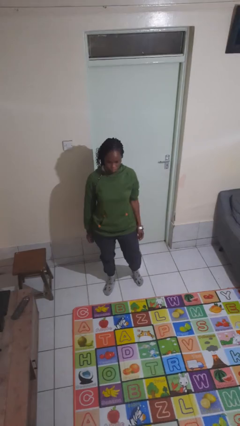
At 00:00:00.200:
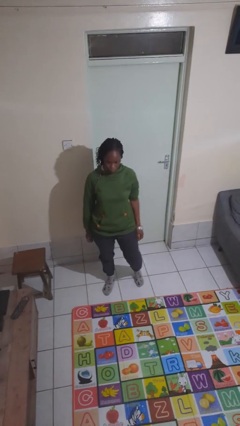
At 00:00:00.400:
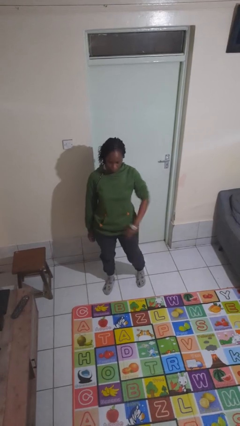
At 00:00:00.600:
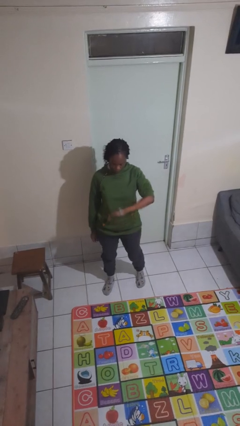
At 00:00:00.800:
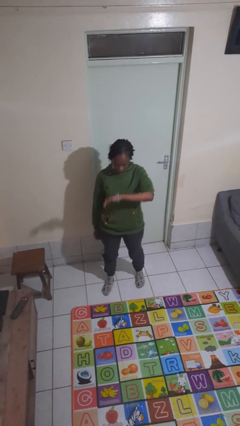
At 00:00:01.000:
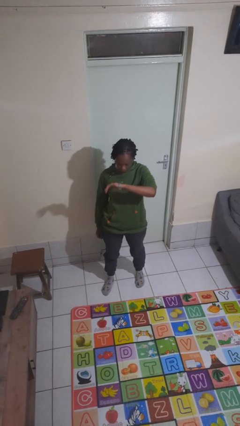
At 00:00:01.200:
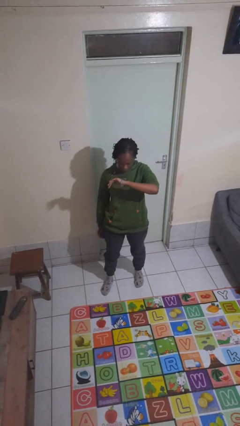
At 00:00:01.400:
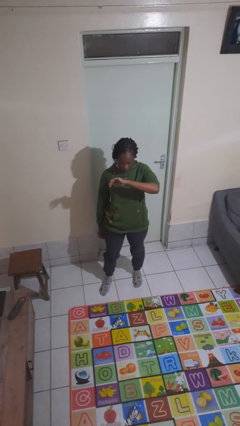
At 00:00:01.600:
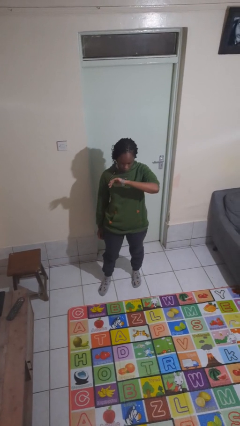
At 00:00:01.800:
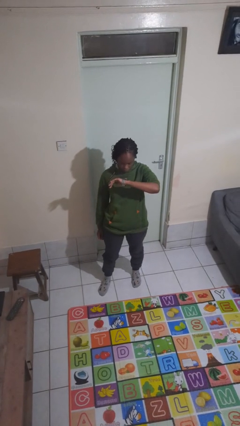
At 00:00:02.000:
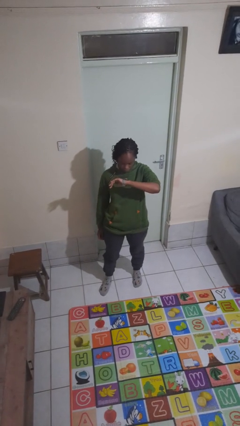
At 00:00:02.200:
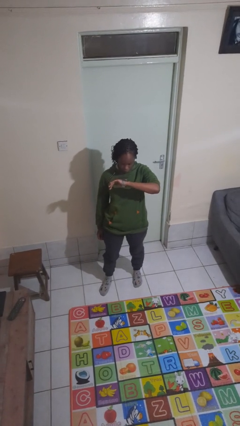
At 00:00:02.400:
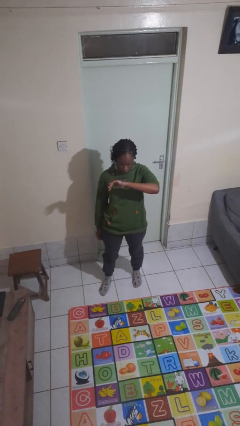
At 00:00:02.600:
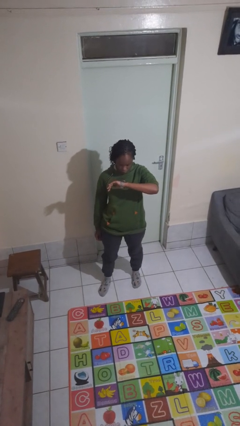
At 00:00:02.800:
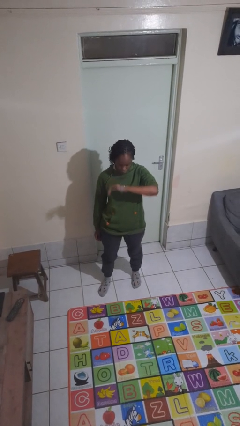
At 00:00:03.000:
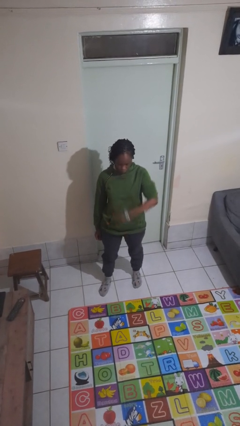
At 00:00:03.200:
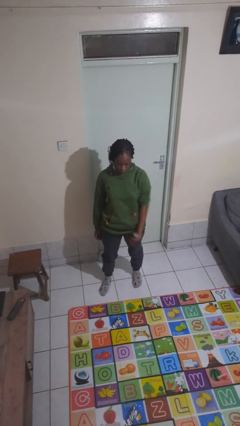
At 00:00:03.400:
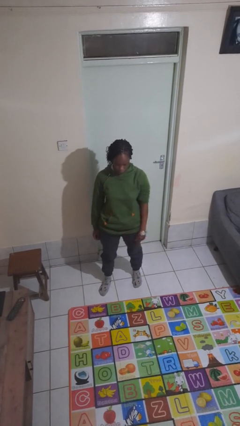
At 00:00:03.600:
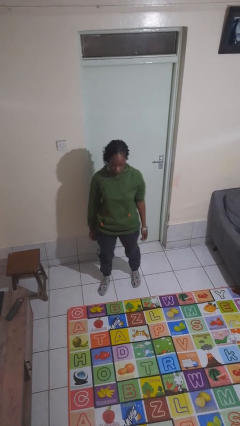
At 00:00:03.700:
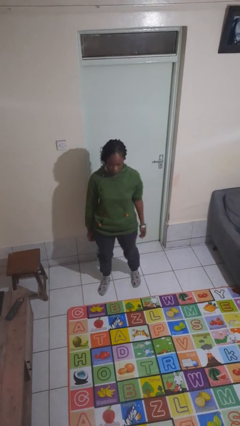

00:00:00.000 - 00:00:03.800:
person looks at wristwatch

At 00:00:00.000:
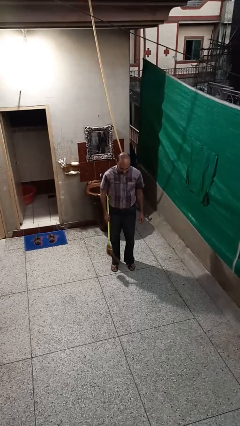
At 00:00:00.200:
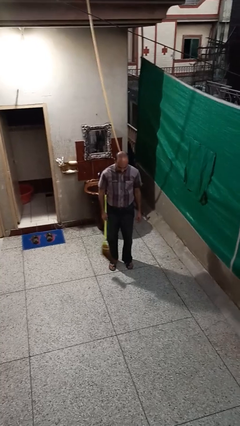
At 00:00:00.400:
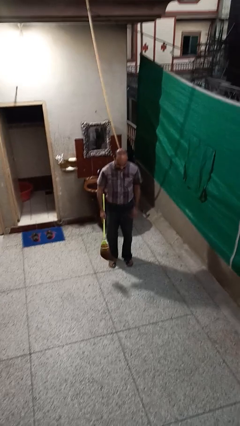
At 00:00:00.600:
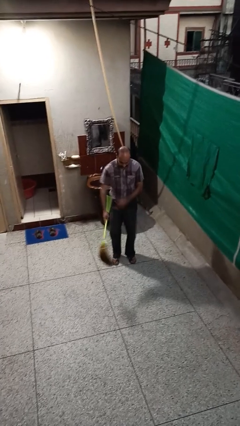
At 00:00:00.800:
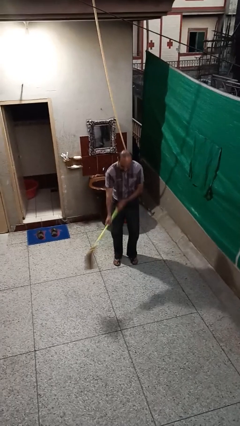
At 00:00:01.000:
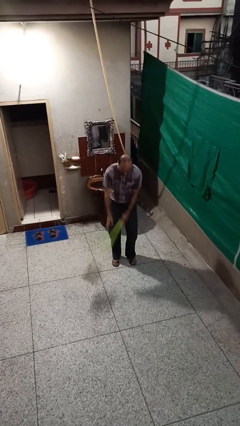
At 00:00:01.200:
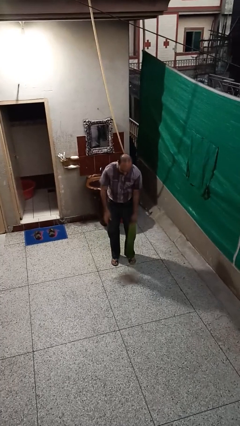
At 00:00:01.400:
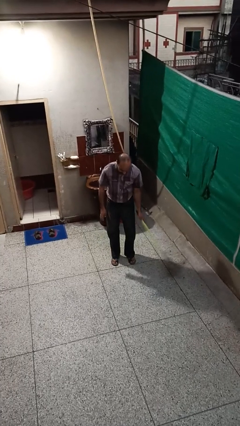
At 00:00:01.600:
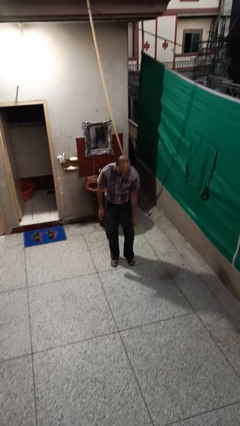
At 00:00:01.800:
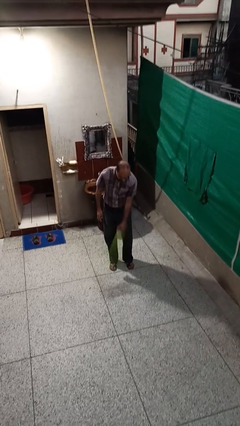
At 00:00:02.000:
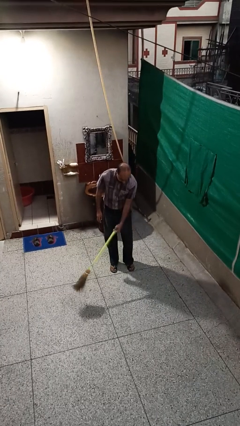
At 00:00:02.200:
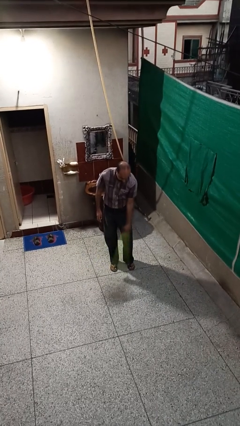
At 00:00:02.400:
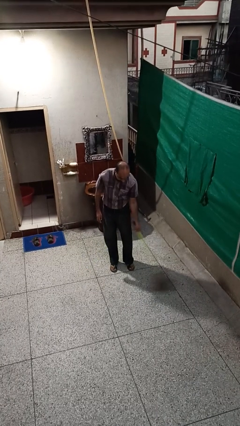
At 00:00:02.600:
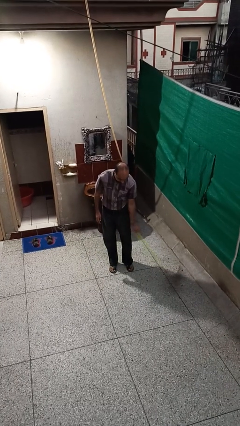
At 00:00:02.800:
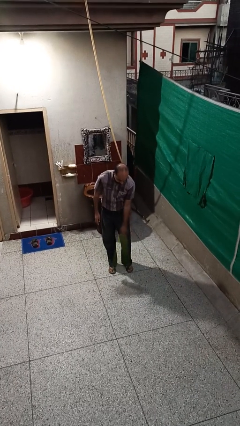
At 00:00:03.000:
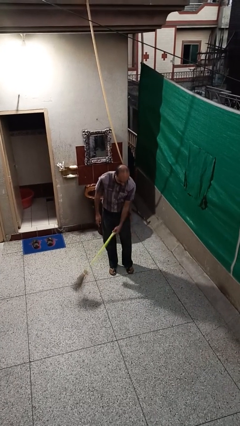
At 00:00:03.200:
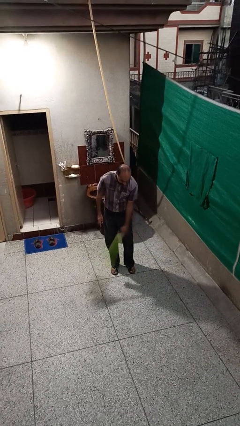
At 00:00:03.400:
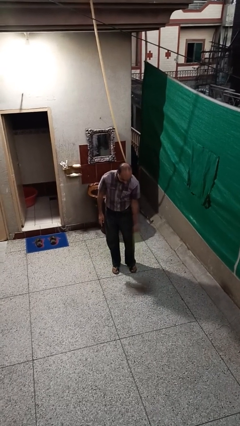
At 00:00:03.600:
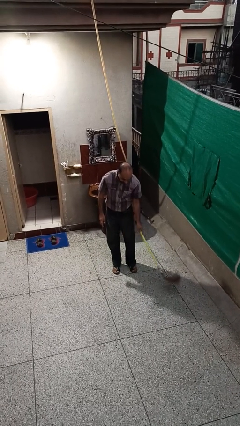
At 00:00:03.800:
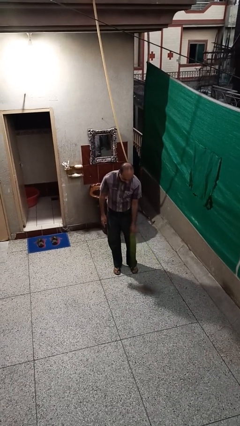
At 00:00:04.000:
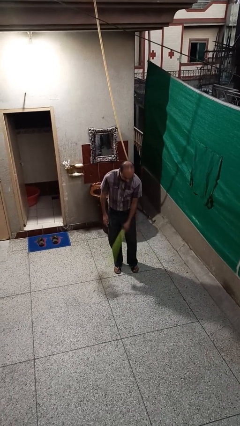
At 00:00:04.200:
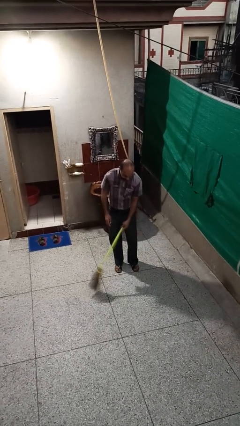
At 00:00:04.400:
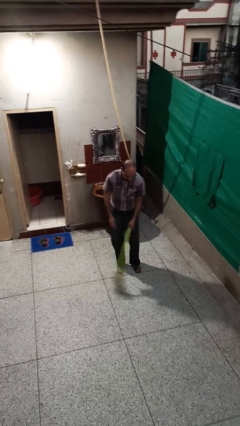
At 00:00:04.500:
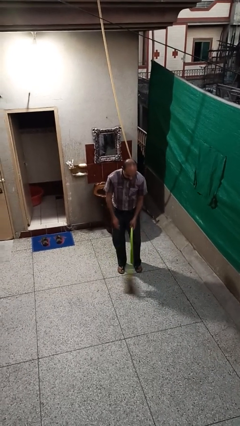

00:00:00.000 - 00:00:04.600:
person sweeps floor

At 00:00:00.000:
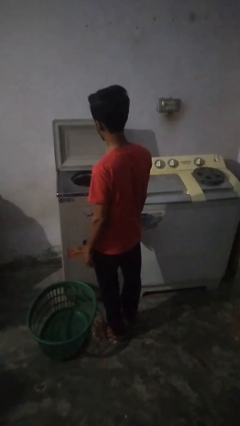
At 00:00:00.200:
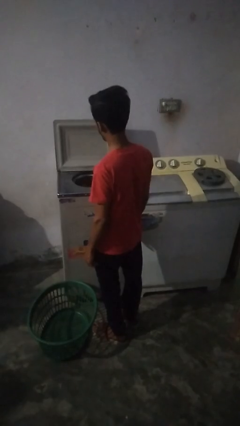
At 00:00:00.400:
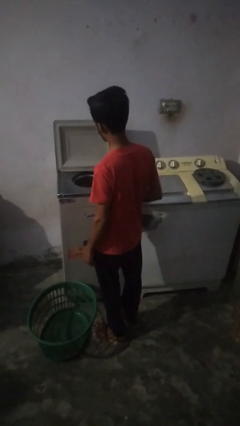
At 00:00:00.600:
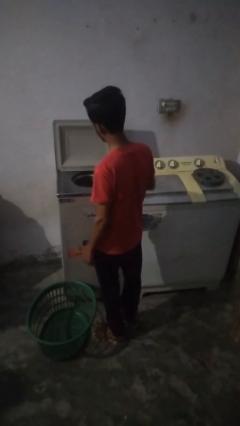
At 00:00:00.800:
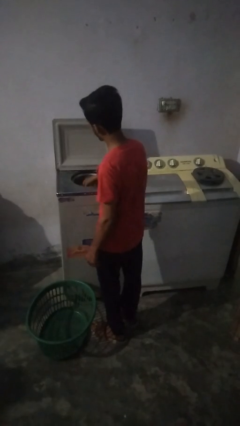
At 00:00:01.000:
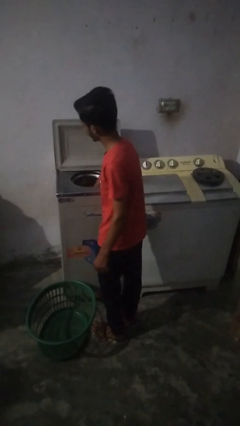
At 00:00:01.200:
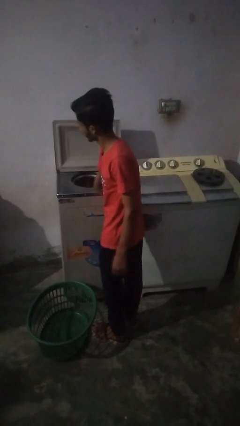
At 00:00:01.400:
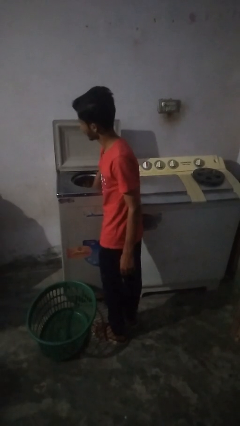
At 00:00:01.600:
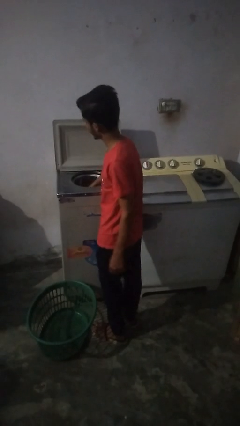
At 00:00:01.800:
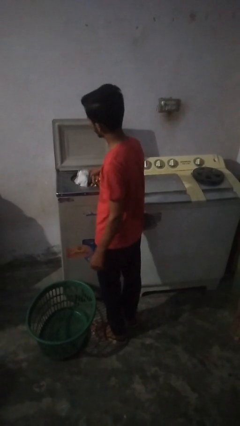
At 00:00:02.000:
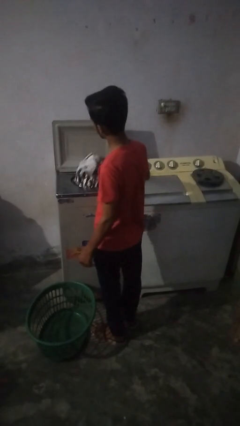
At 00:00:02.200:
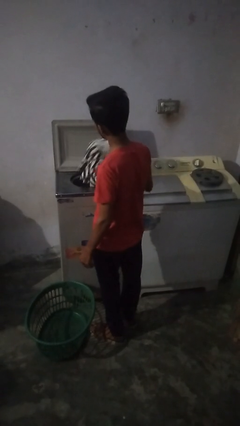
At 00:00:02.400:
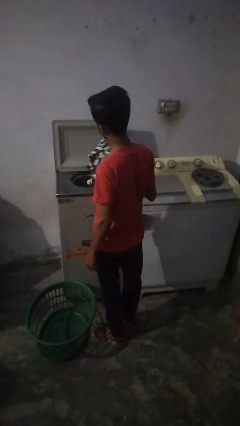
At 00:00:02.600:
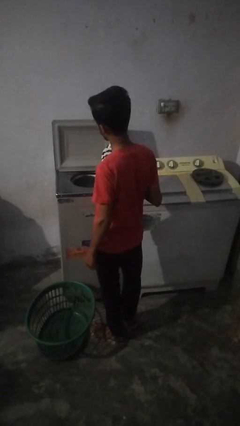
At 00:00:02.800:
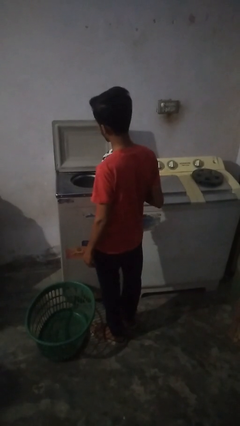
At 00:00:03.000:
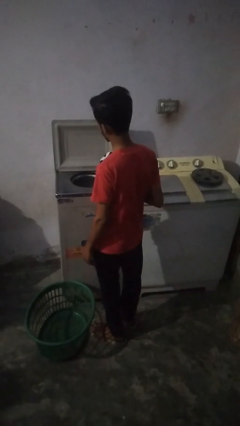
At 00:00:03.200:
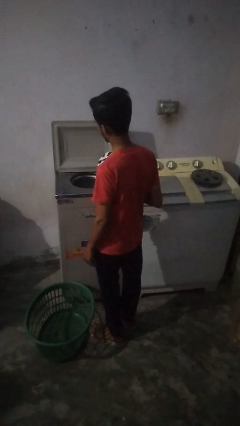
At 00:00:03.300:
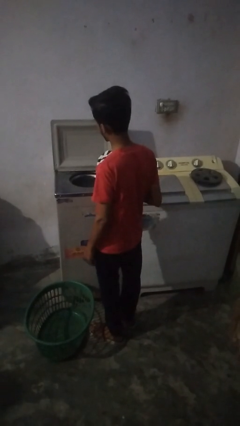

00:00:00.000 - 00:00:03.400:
person unloads dryer

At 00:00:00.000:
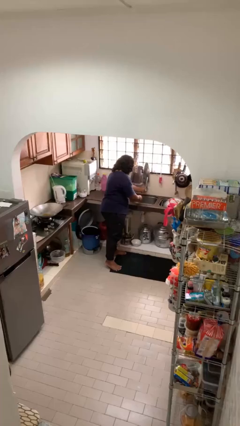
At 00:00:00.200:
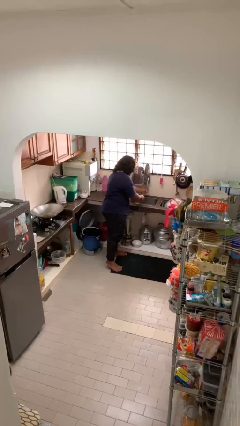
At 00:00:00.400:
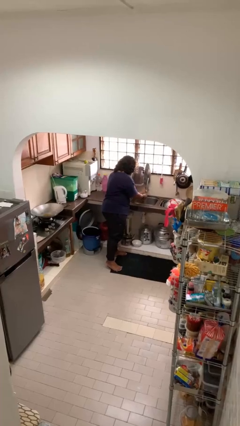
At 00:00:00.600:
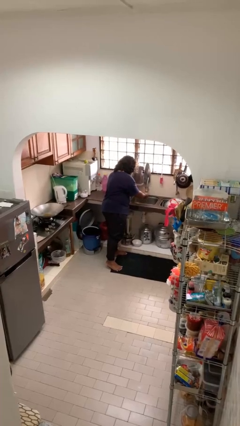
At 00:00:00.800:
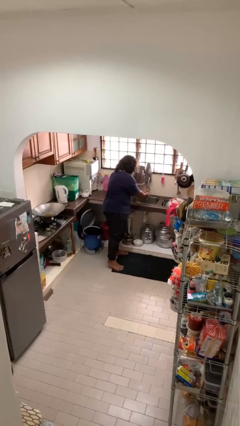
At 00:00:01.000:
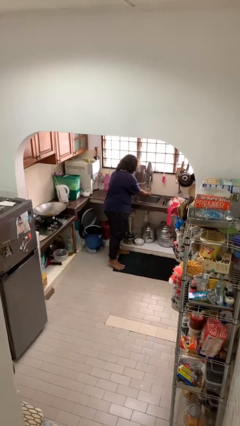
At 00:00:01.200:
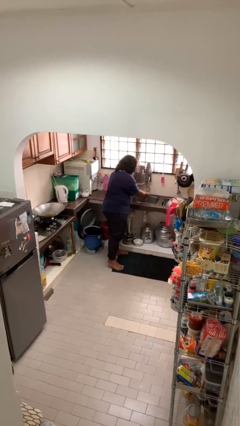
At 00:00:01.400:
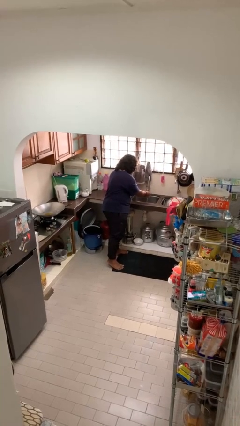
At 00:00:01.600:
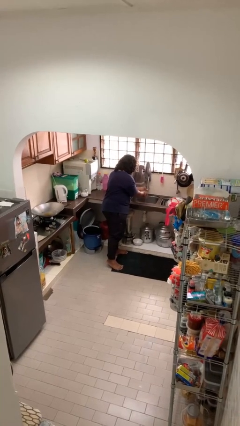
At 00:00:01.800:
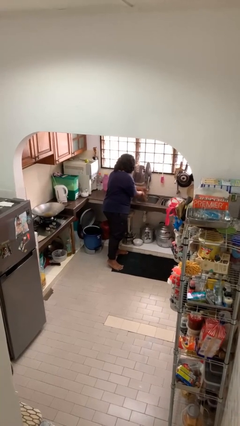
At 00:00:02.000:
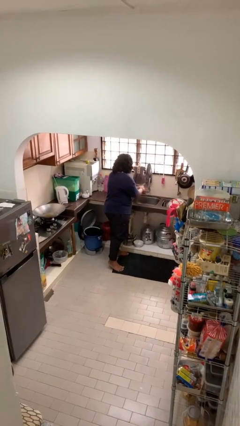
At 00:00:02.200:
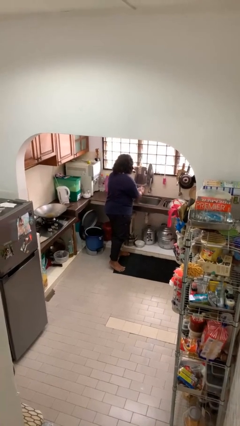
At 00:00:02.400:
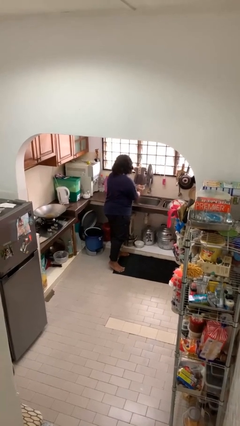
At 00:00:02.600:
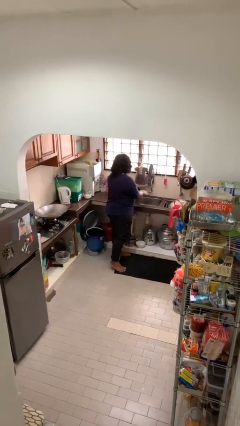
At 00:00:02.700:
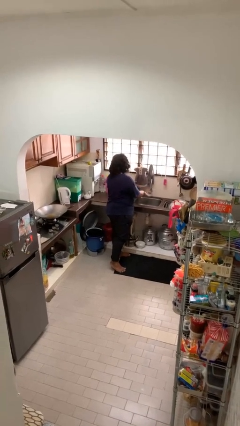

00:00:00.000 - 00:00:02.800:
person washes hands

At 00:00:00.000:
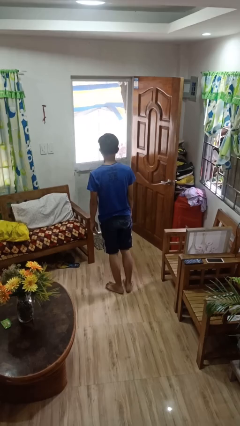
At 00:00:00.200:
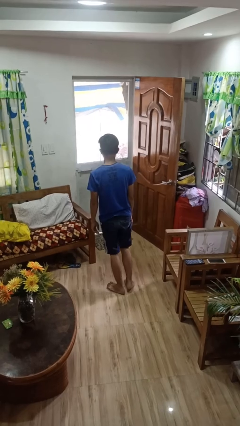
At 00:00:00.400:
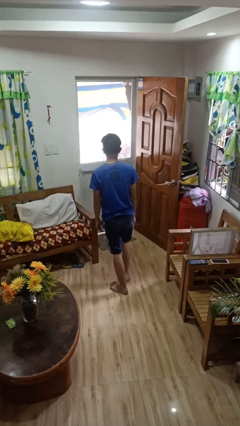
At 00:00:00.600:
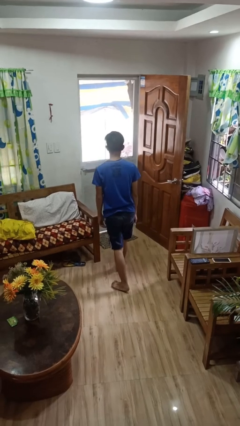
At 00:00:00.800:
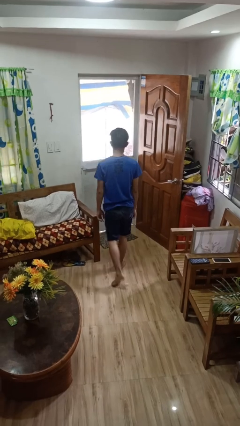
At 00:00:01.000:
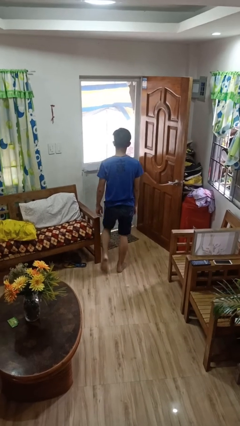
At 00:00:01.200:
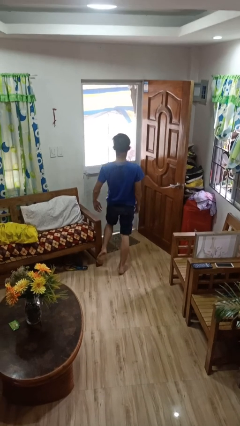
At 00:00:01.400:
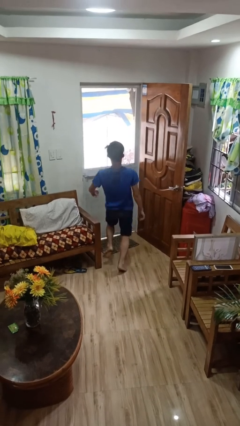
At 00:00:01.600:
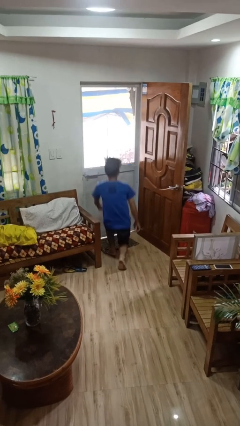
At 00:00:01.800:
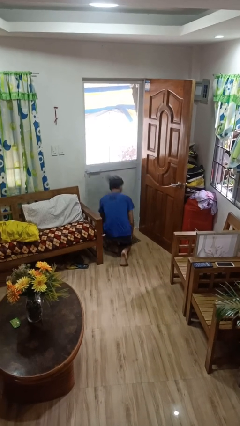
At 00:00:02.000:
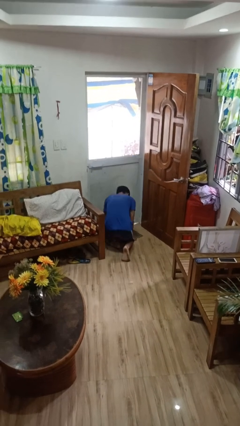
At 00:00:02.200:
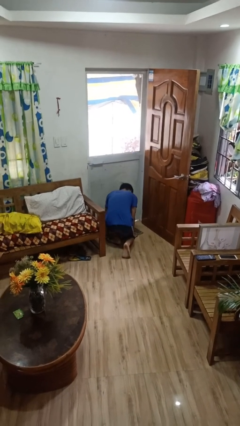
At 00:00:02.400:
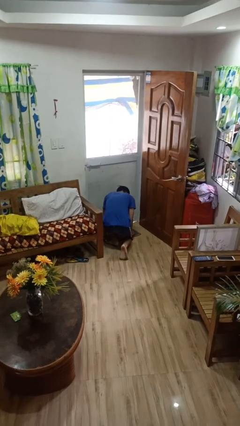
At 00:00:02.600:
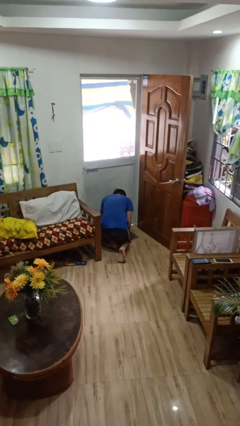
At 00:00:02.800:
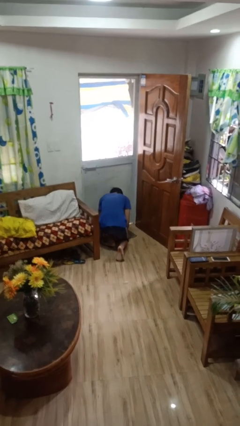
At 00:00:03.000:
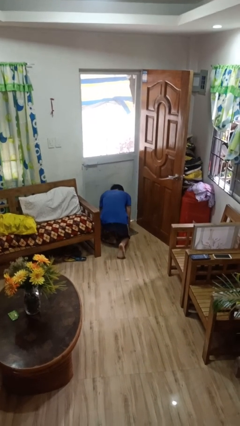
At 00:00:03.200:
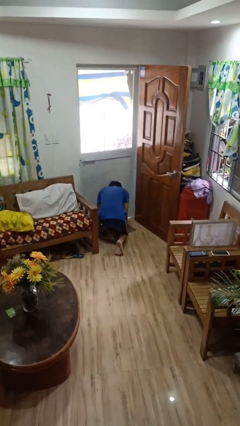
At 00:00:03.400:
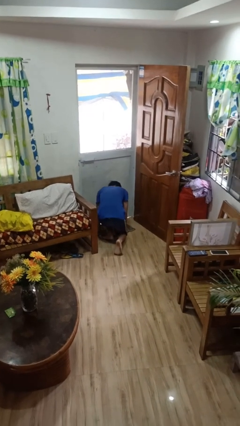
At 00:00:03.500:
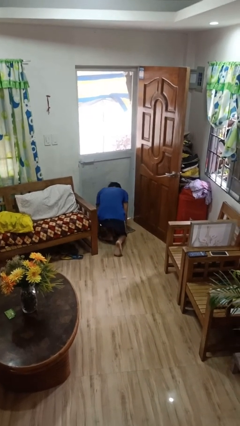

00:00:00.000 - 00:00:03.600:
person trips on object on floor
